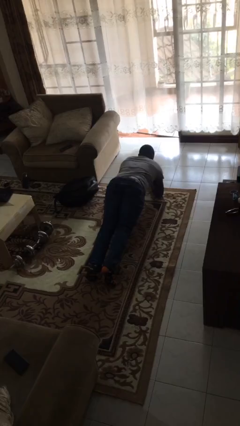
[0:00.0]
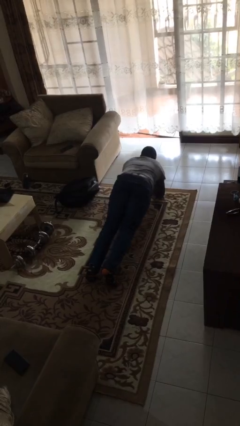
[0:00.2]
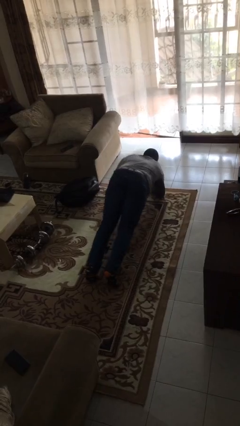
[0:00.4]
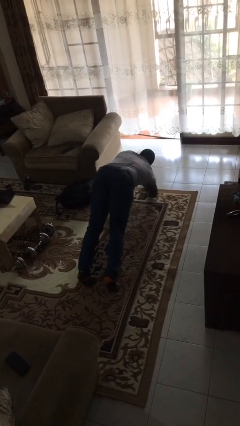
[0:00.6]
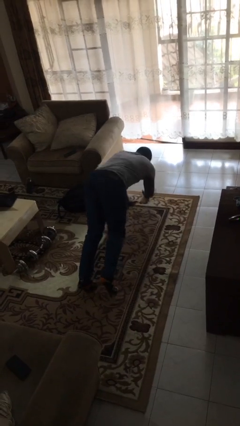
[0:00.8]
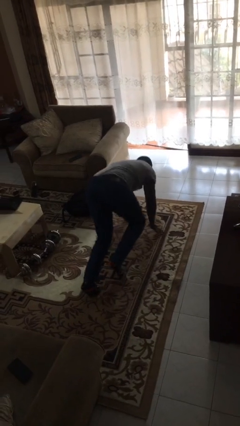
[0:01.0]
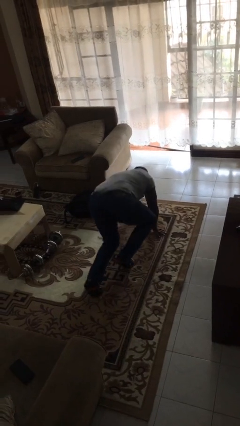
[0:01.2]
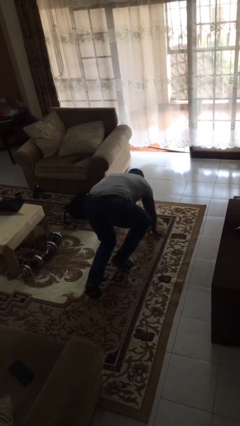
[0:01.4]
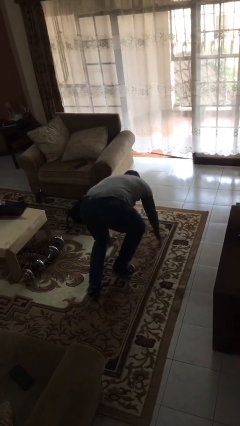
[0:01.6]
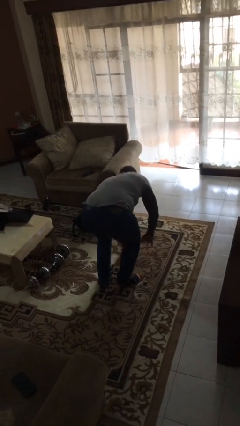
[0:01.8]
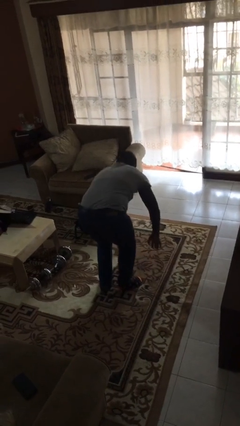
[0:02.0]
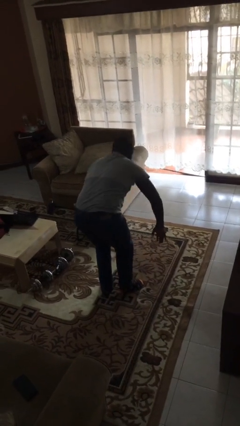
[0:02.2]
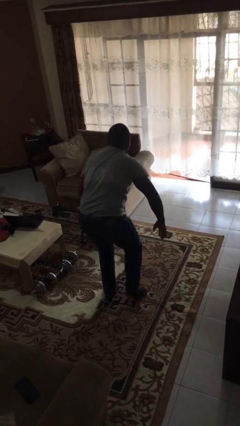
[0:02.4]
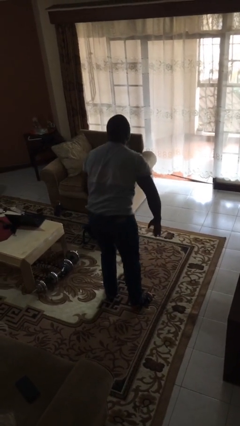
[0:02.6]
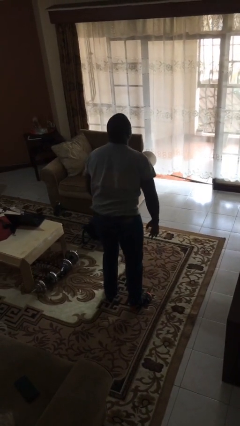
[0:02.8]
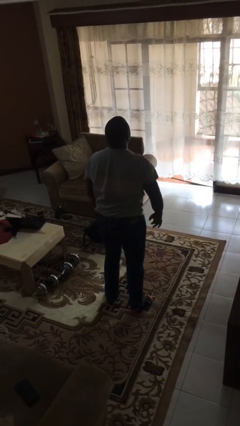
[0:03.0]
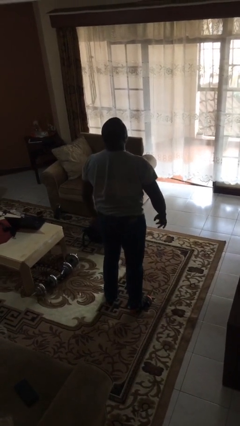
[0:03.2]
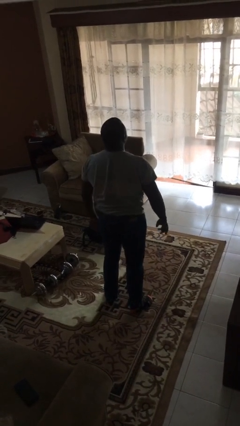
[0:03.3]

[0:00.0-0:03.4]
person stands up from floor

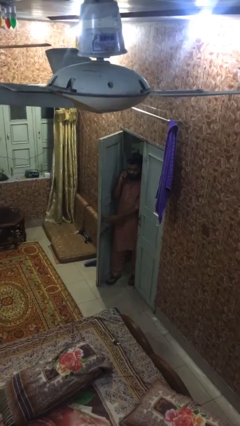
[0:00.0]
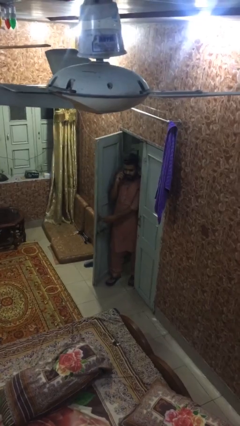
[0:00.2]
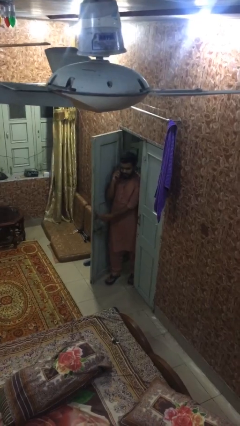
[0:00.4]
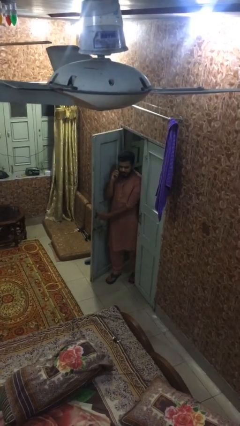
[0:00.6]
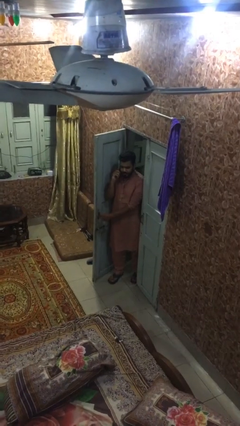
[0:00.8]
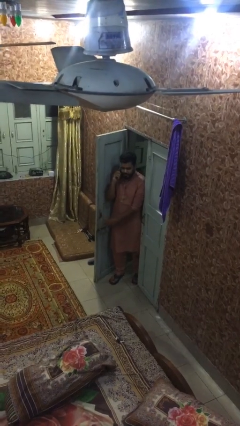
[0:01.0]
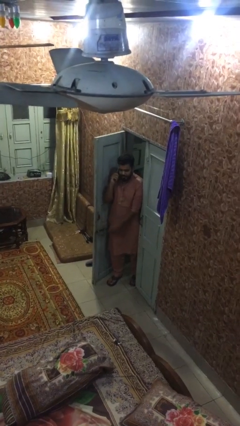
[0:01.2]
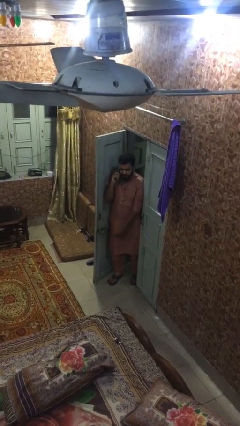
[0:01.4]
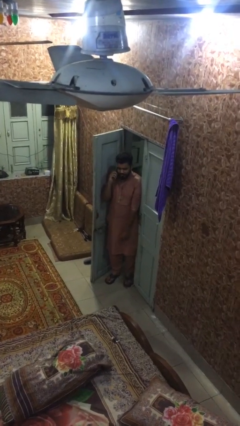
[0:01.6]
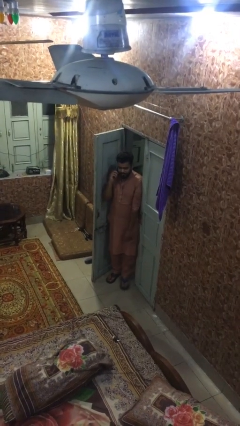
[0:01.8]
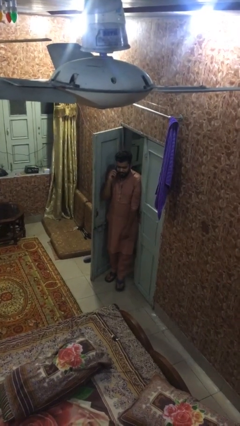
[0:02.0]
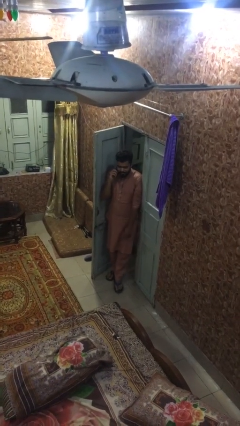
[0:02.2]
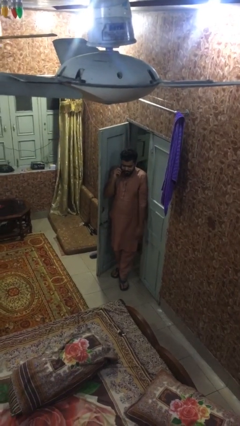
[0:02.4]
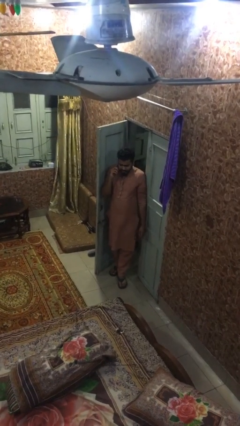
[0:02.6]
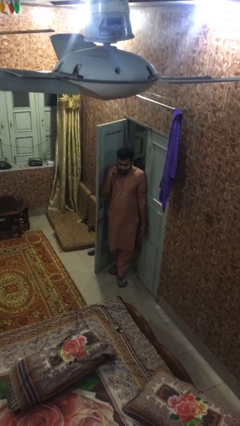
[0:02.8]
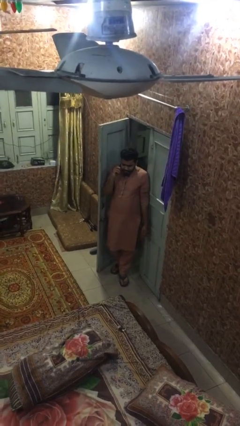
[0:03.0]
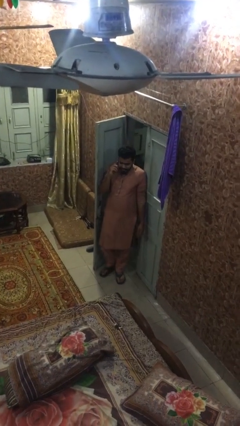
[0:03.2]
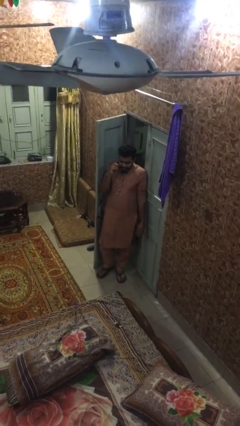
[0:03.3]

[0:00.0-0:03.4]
person opens facility door

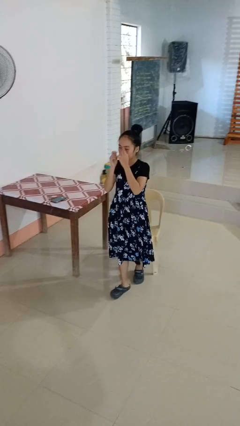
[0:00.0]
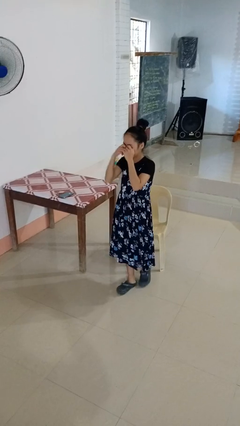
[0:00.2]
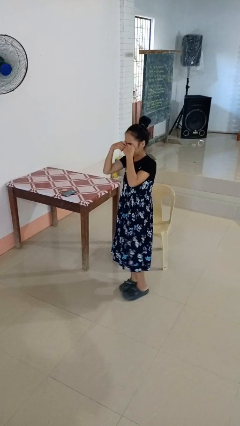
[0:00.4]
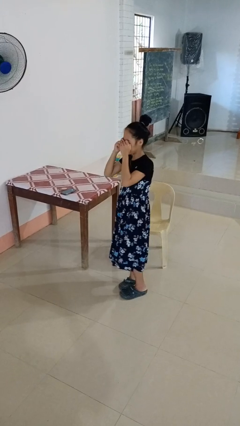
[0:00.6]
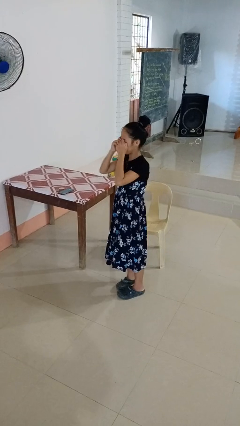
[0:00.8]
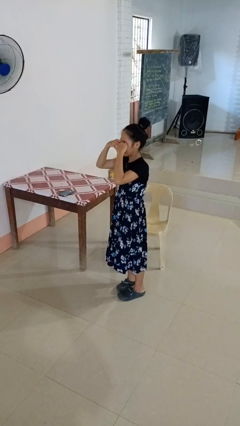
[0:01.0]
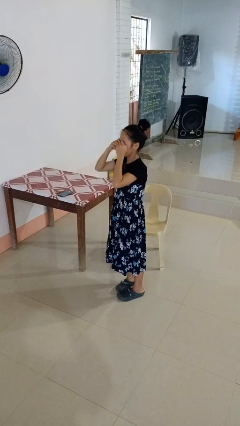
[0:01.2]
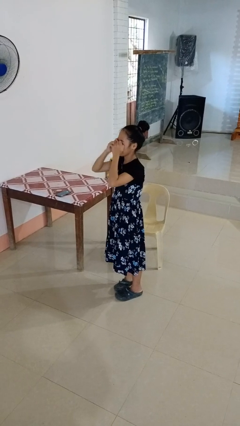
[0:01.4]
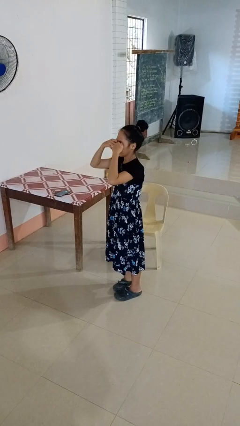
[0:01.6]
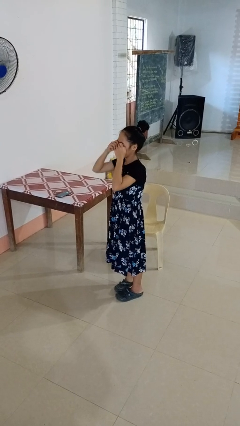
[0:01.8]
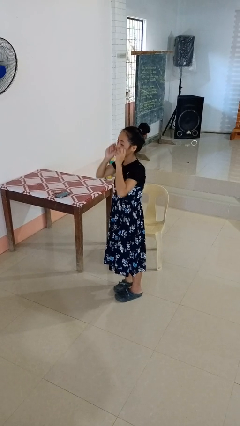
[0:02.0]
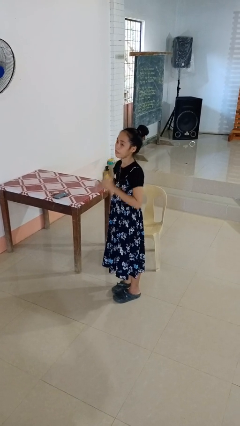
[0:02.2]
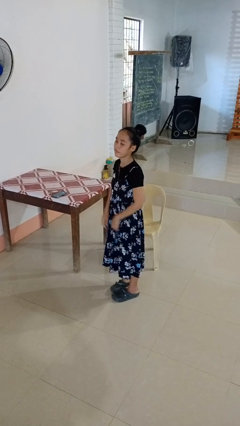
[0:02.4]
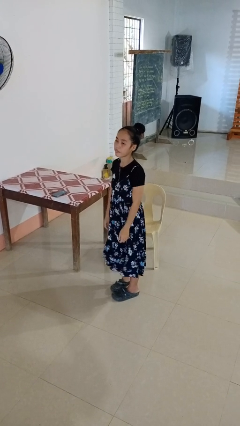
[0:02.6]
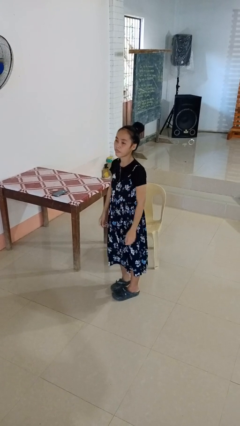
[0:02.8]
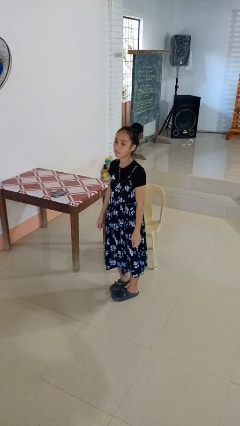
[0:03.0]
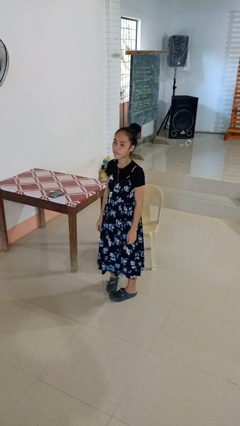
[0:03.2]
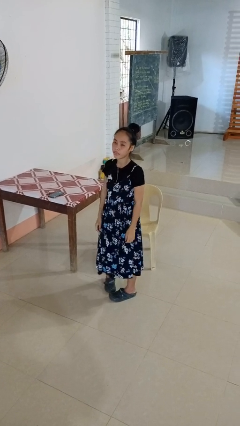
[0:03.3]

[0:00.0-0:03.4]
person rubs eyes

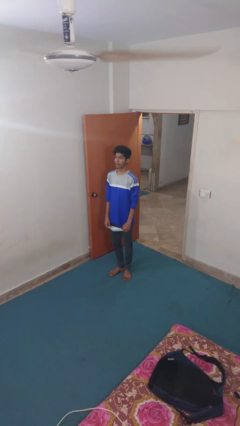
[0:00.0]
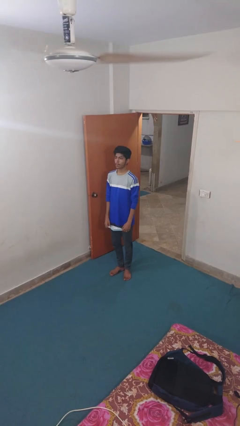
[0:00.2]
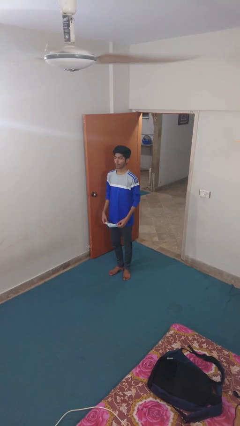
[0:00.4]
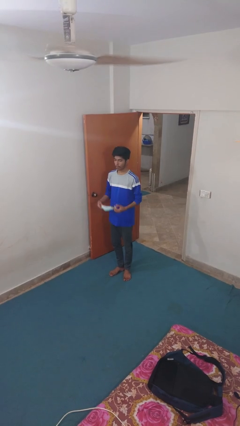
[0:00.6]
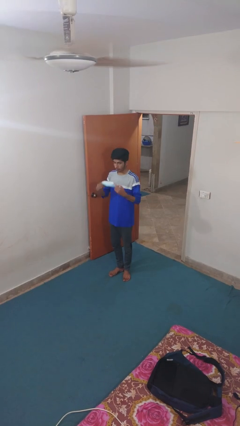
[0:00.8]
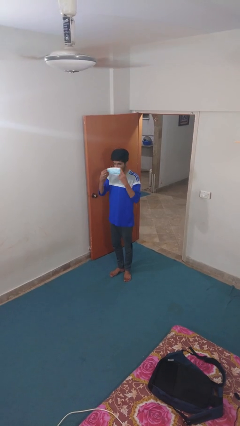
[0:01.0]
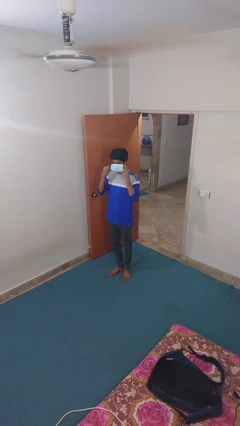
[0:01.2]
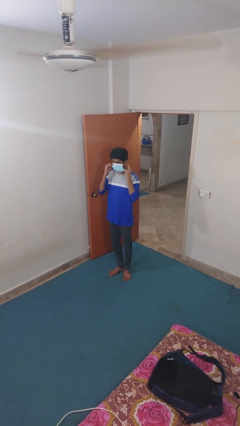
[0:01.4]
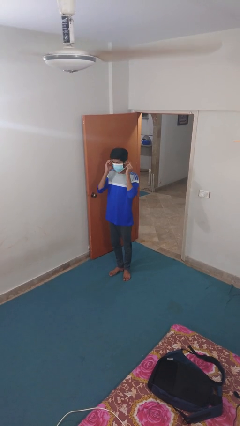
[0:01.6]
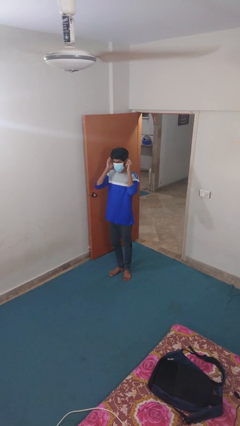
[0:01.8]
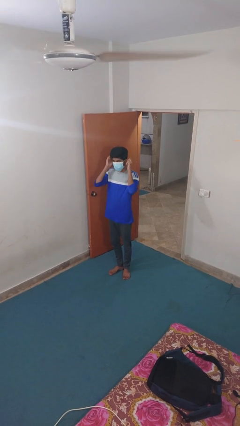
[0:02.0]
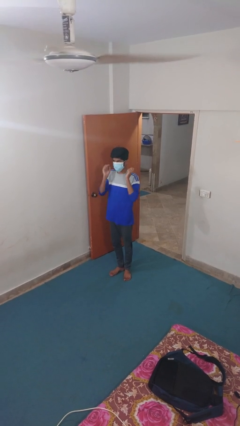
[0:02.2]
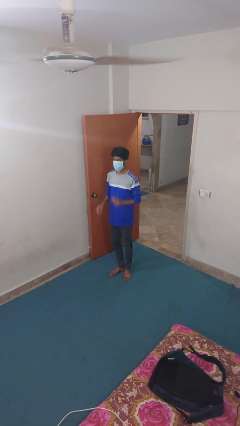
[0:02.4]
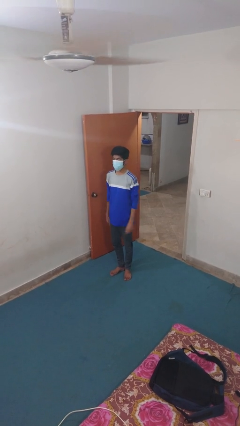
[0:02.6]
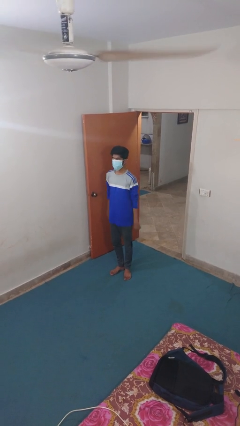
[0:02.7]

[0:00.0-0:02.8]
person puts on facemask

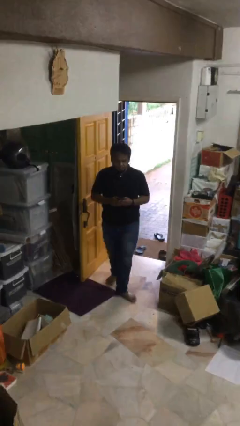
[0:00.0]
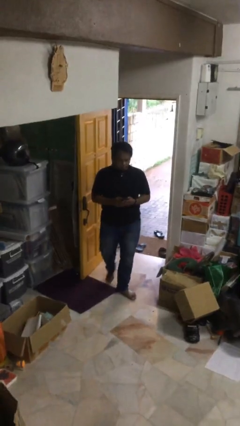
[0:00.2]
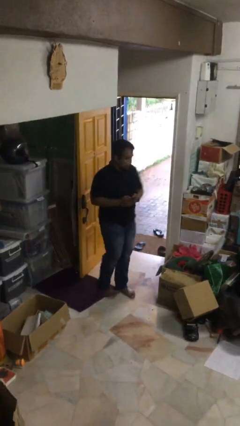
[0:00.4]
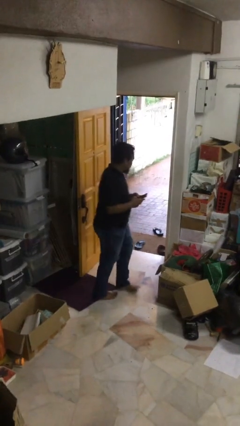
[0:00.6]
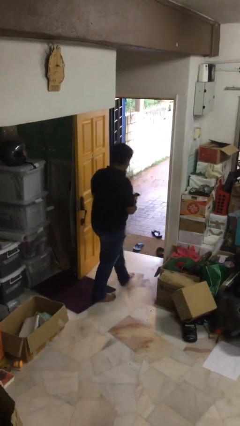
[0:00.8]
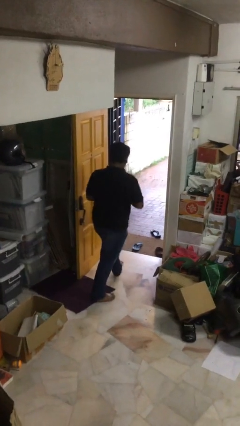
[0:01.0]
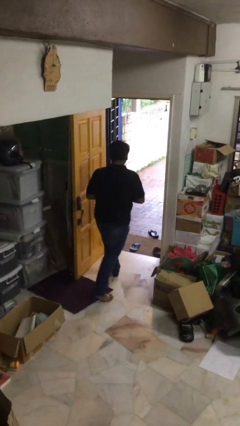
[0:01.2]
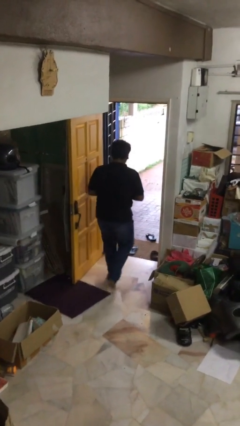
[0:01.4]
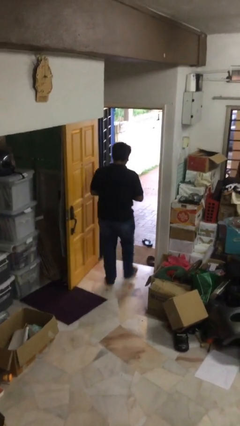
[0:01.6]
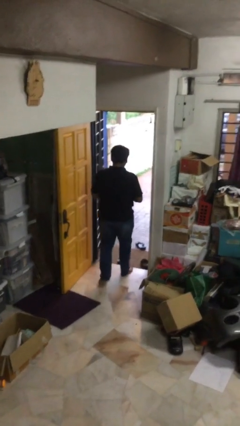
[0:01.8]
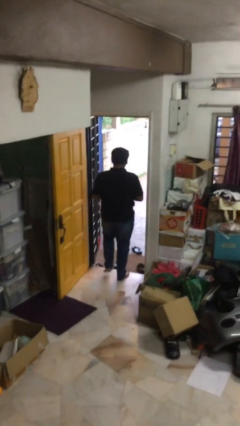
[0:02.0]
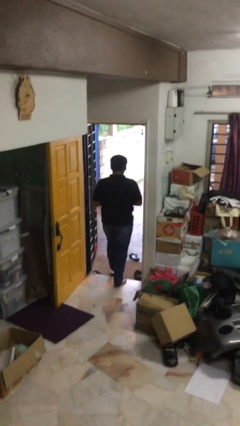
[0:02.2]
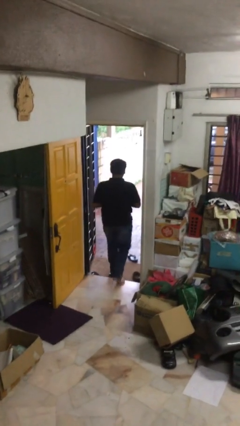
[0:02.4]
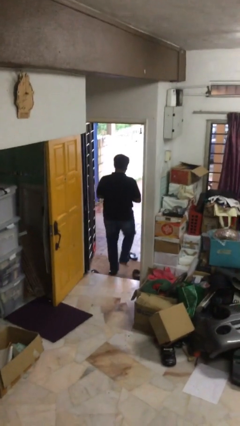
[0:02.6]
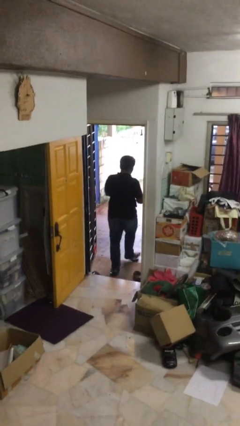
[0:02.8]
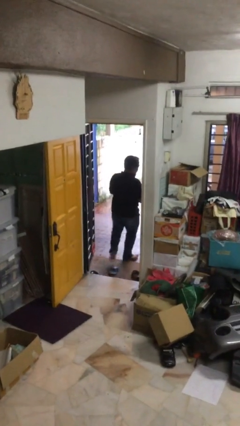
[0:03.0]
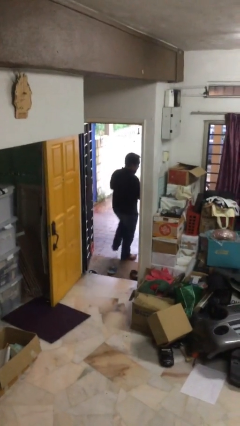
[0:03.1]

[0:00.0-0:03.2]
person exits scene through structure

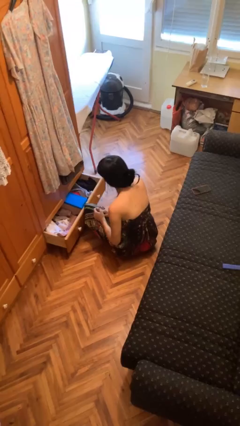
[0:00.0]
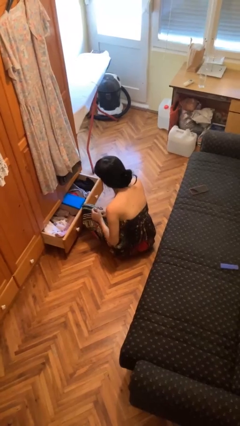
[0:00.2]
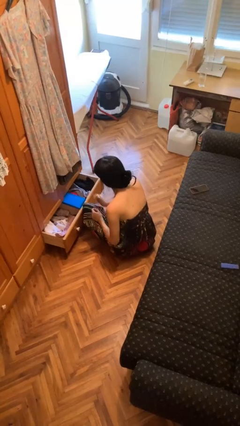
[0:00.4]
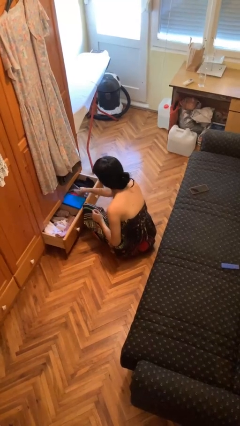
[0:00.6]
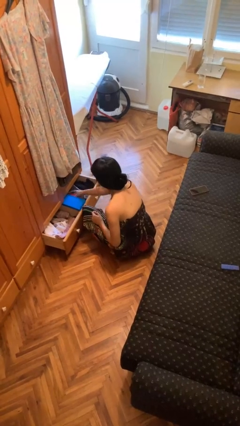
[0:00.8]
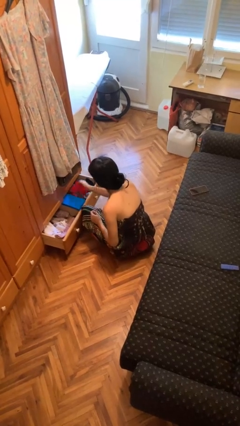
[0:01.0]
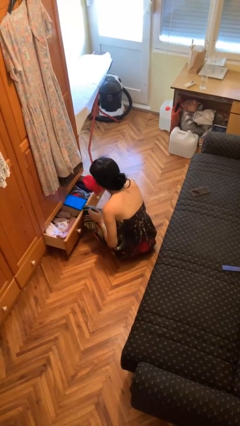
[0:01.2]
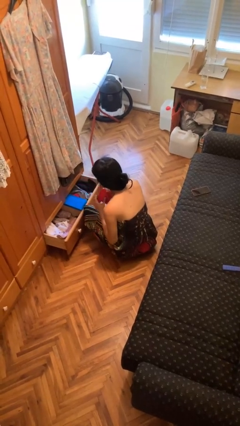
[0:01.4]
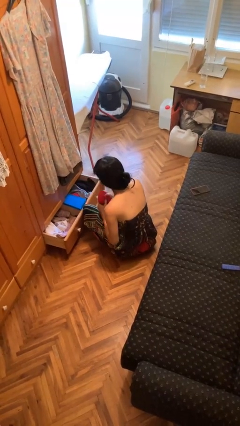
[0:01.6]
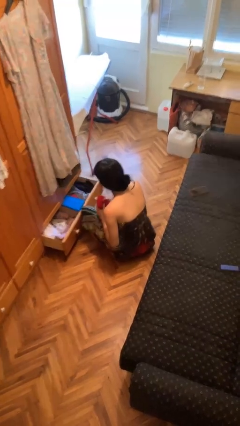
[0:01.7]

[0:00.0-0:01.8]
person takes clothes from dresser
